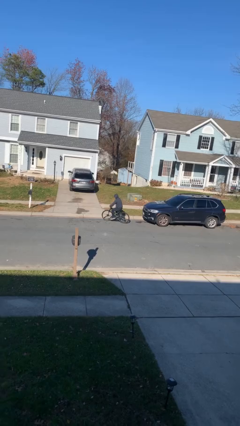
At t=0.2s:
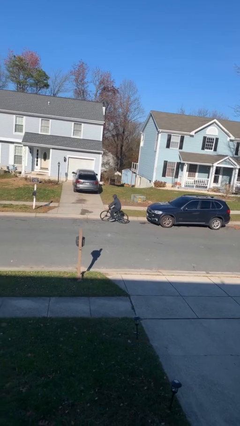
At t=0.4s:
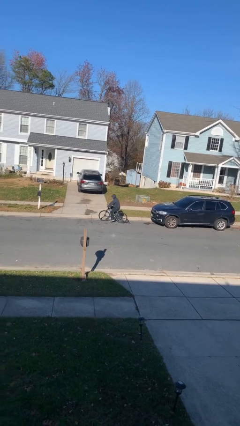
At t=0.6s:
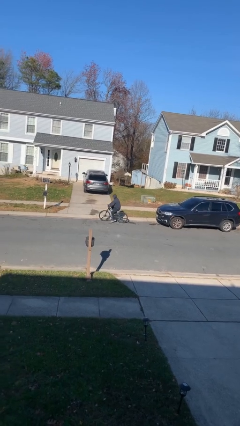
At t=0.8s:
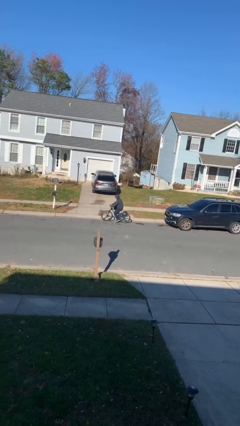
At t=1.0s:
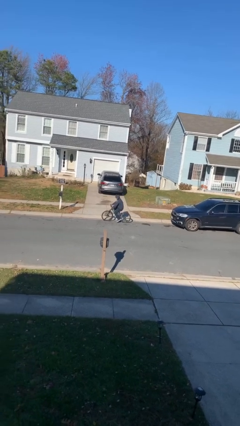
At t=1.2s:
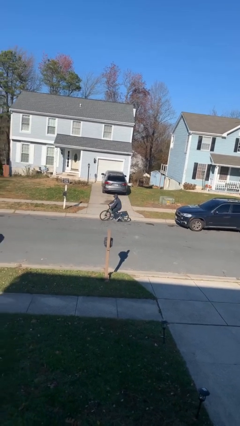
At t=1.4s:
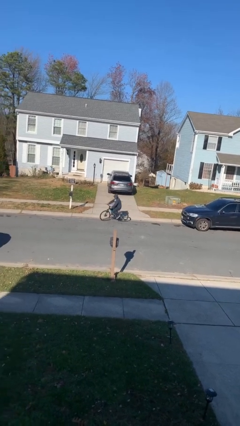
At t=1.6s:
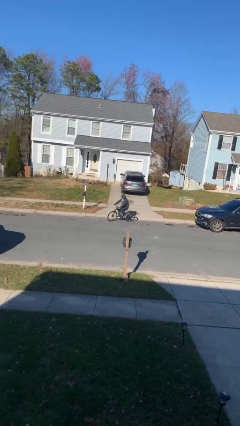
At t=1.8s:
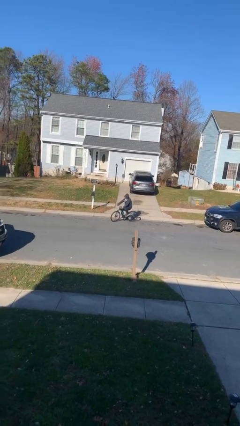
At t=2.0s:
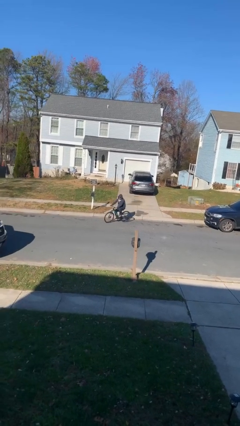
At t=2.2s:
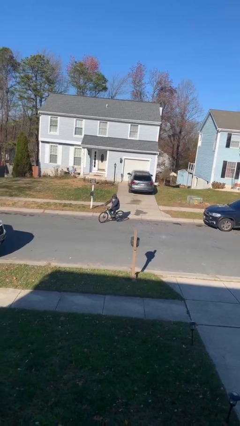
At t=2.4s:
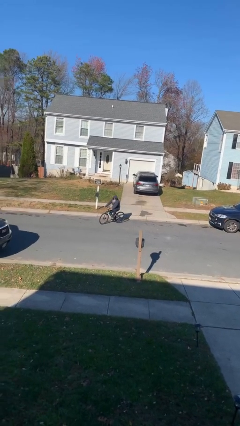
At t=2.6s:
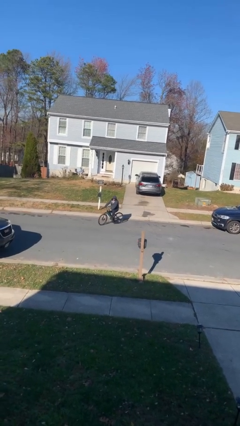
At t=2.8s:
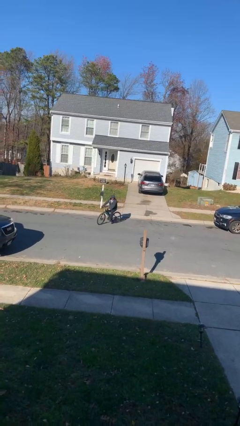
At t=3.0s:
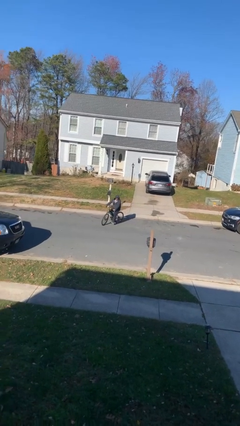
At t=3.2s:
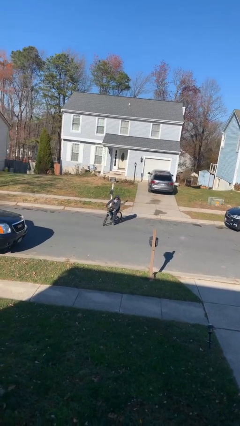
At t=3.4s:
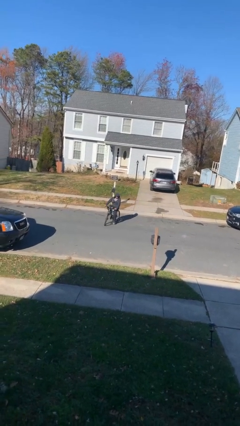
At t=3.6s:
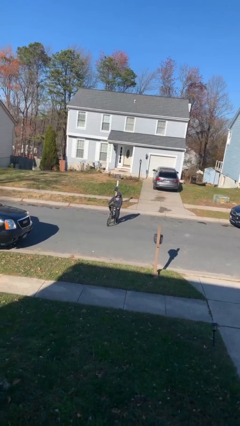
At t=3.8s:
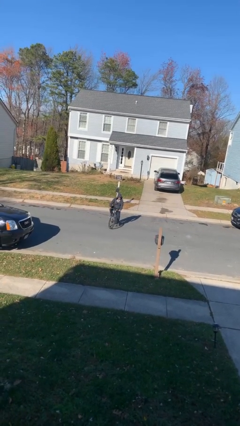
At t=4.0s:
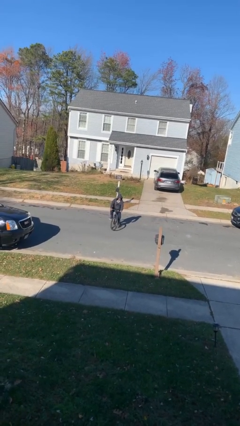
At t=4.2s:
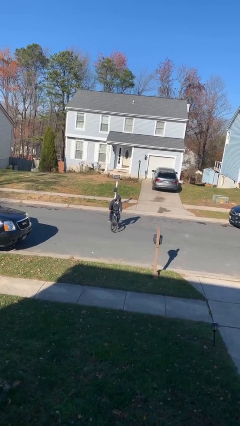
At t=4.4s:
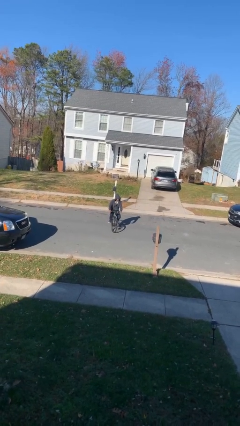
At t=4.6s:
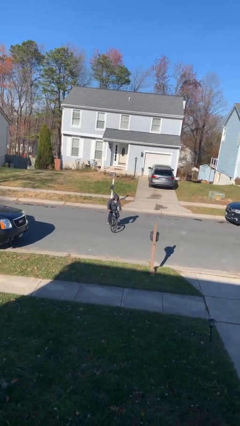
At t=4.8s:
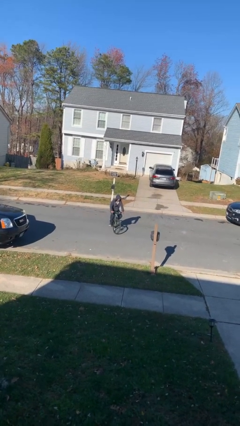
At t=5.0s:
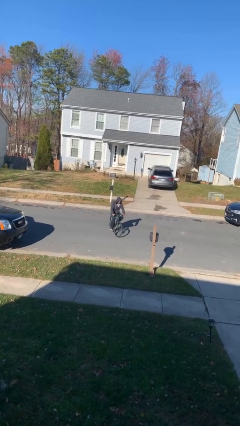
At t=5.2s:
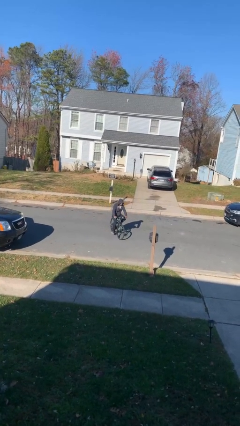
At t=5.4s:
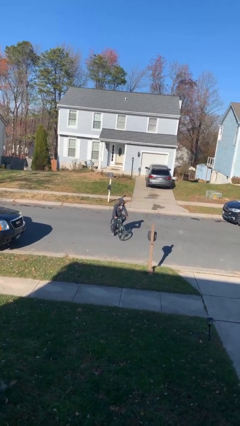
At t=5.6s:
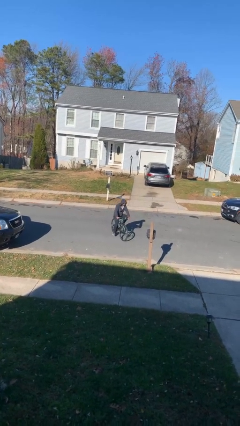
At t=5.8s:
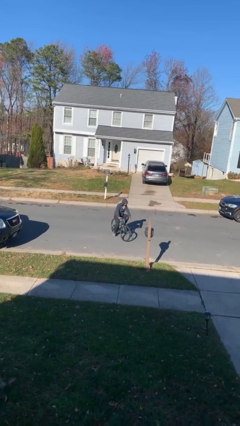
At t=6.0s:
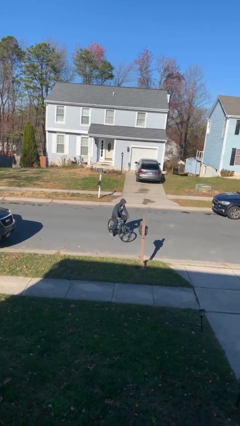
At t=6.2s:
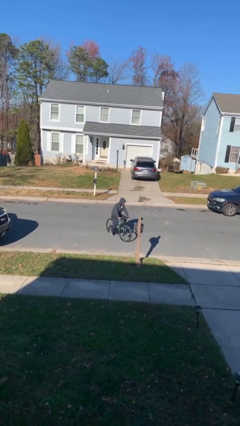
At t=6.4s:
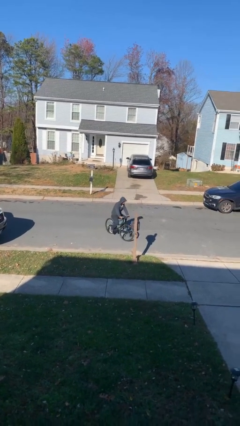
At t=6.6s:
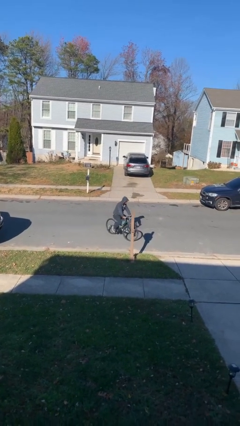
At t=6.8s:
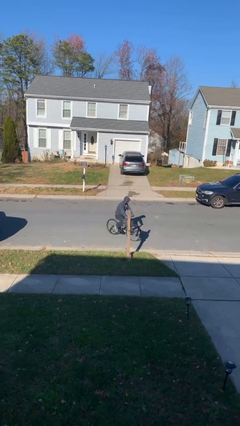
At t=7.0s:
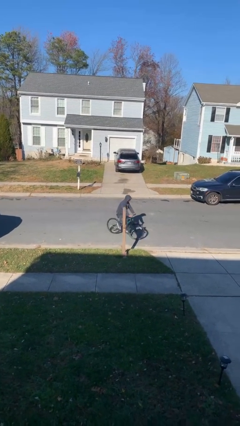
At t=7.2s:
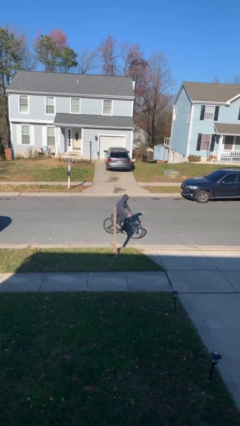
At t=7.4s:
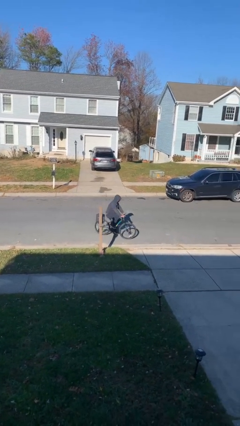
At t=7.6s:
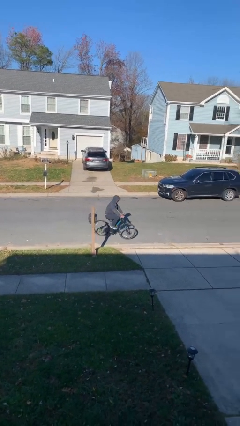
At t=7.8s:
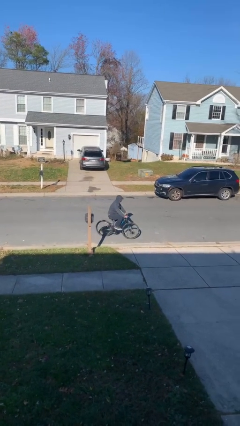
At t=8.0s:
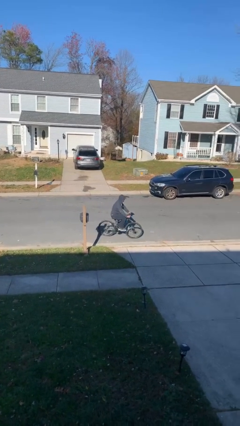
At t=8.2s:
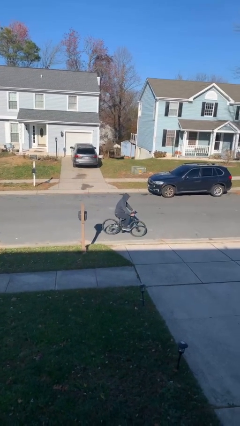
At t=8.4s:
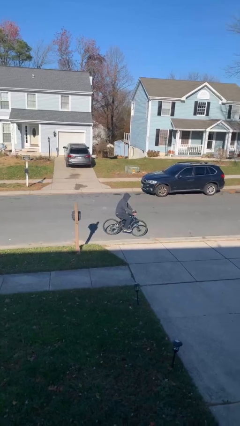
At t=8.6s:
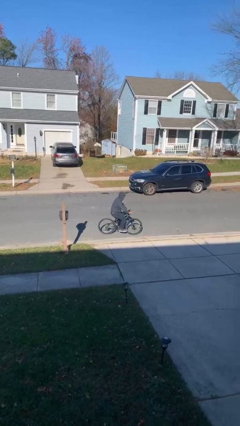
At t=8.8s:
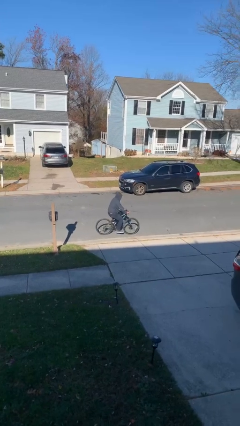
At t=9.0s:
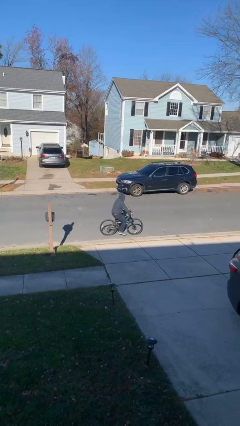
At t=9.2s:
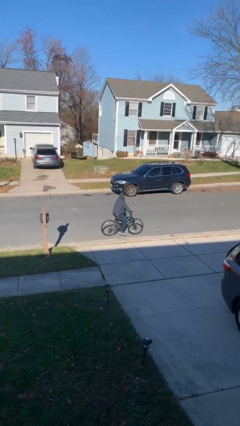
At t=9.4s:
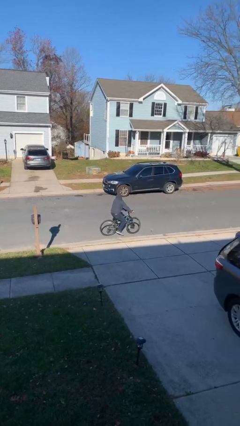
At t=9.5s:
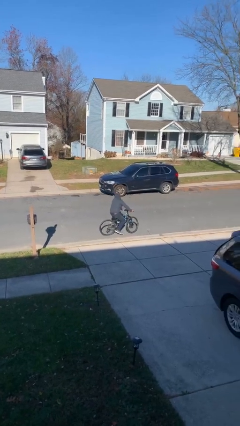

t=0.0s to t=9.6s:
person rides bicycle

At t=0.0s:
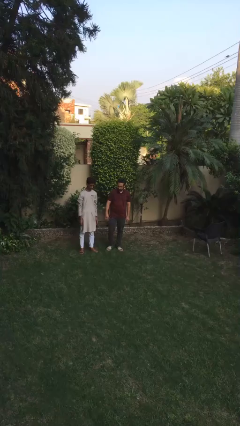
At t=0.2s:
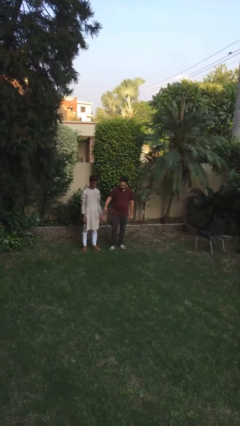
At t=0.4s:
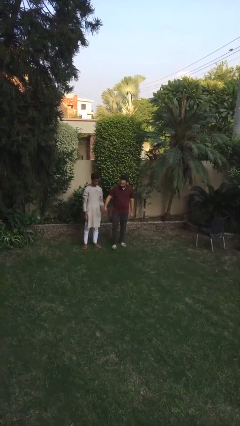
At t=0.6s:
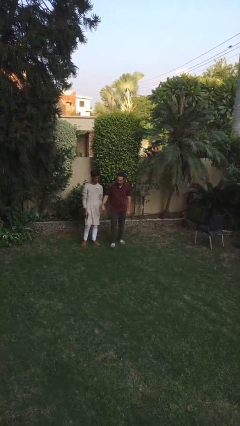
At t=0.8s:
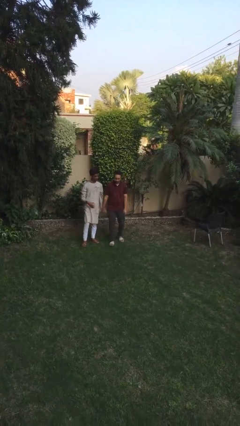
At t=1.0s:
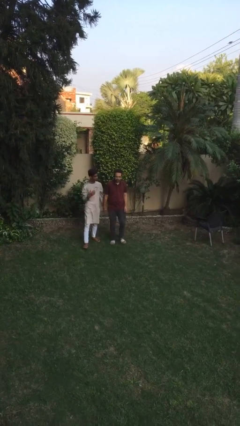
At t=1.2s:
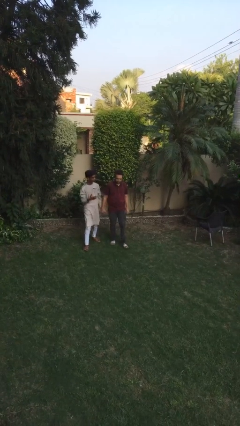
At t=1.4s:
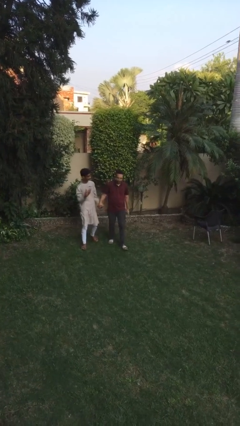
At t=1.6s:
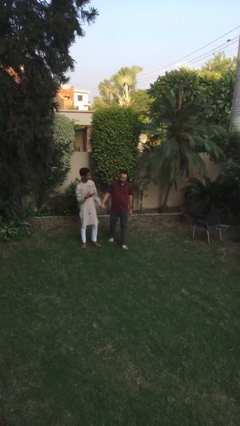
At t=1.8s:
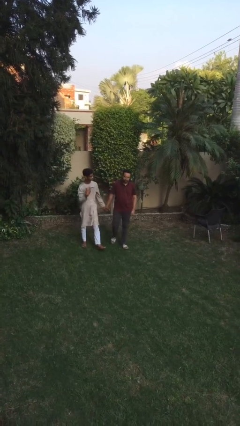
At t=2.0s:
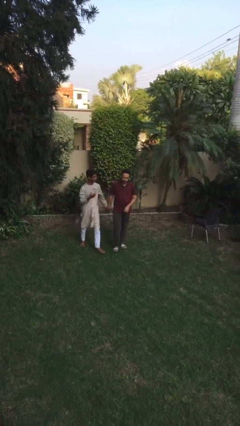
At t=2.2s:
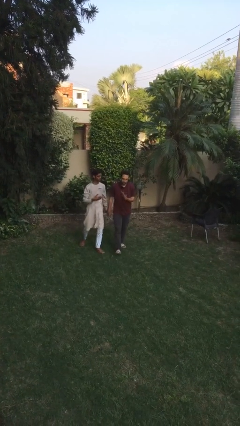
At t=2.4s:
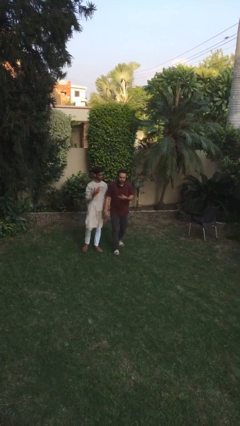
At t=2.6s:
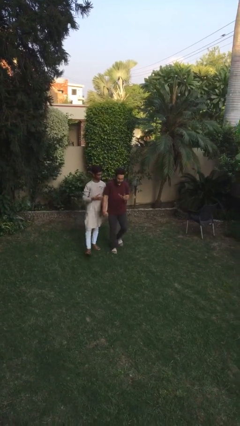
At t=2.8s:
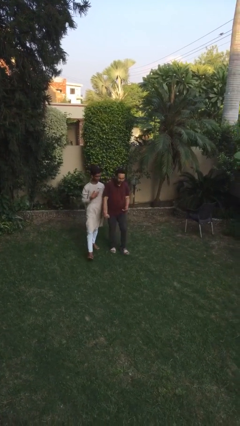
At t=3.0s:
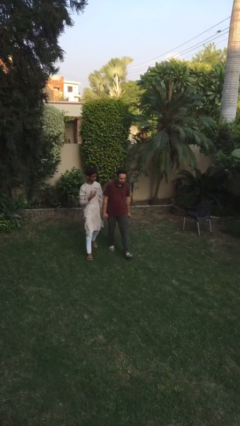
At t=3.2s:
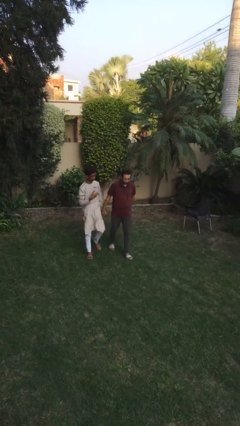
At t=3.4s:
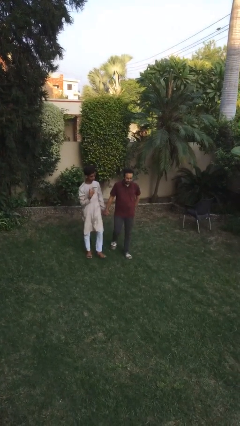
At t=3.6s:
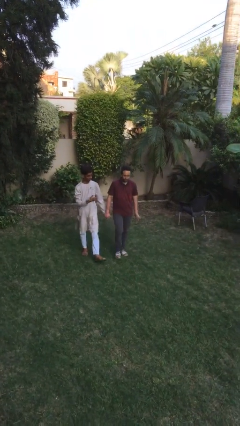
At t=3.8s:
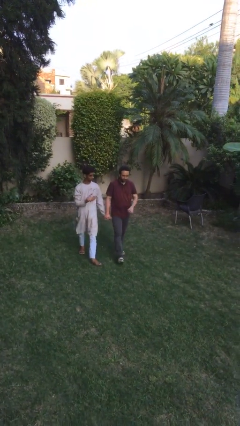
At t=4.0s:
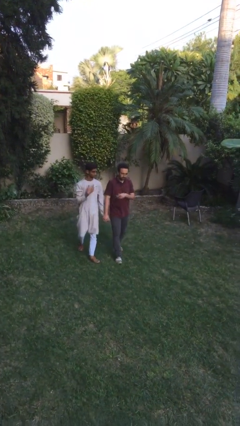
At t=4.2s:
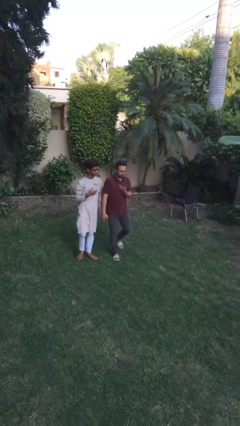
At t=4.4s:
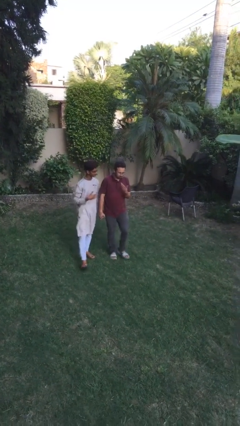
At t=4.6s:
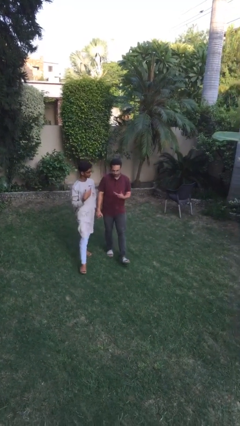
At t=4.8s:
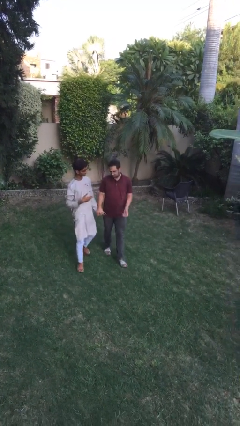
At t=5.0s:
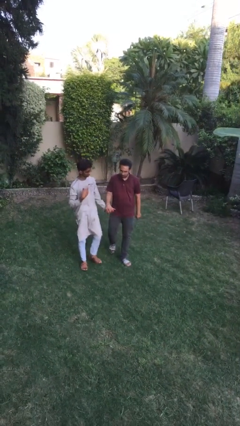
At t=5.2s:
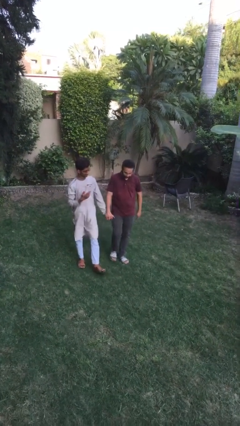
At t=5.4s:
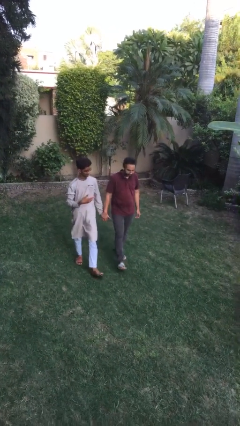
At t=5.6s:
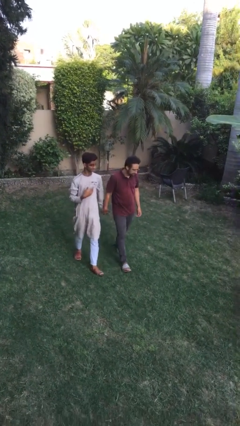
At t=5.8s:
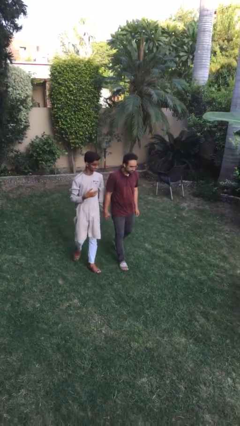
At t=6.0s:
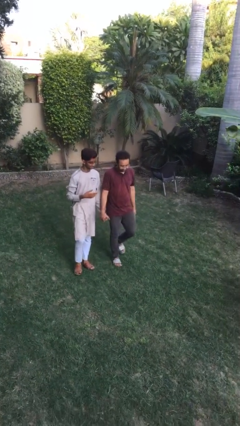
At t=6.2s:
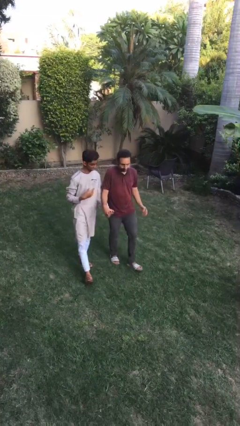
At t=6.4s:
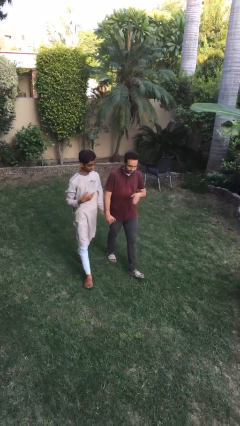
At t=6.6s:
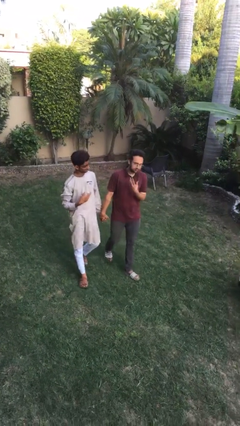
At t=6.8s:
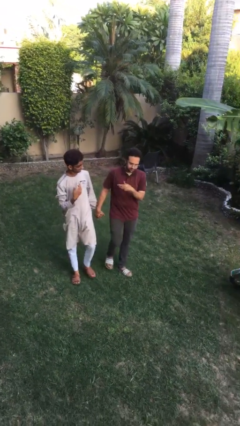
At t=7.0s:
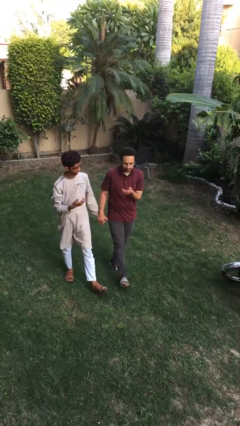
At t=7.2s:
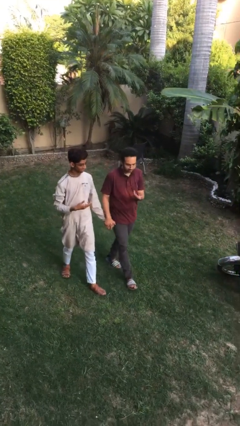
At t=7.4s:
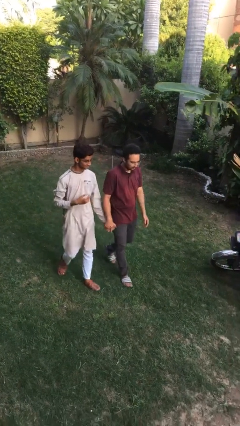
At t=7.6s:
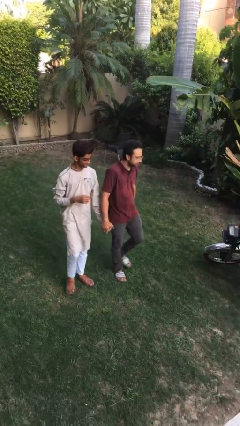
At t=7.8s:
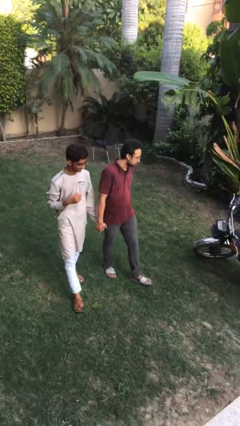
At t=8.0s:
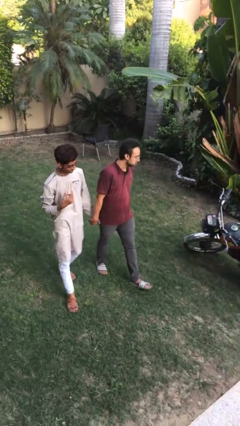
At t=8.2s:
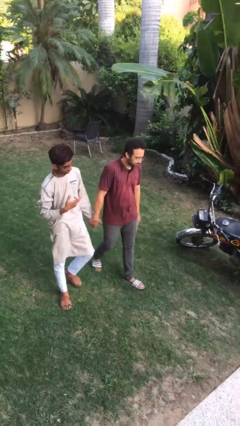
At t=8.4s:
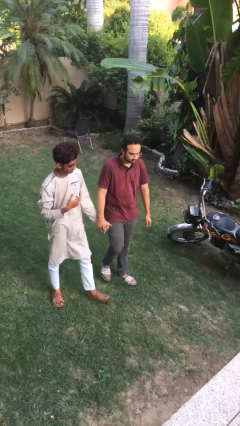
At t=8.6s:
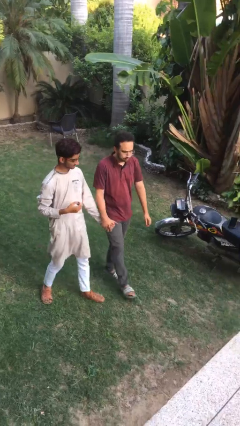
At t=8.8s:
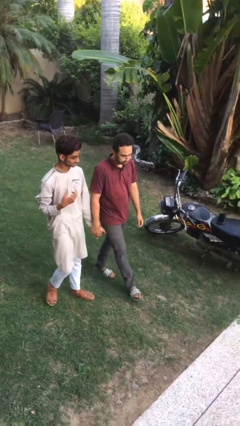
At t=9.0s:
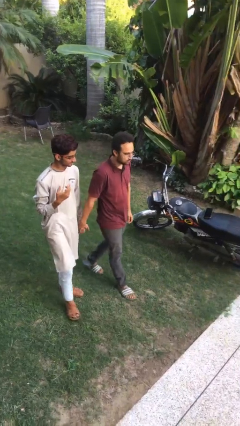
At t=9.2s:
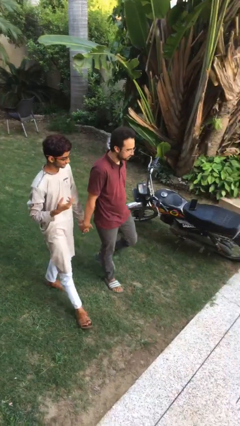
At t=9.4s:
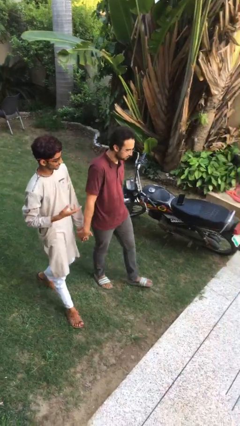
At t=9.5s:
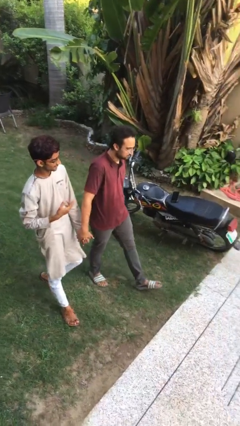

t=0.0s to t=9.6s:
person holds hand
